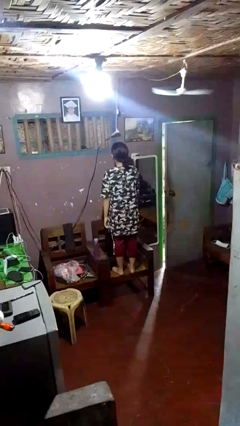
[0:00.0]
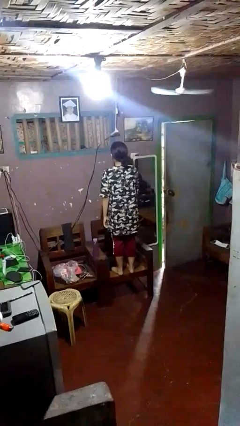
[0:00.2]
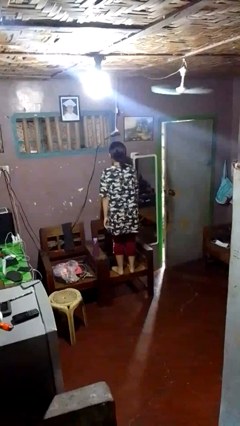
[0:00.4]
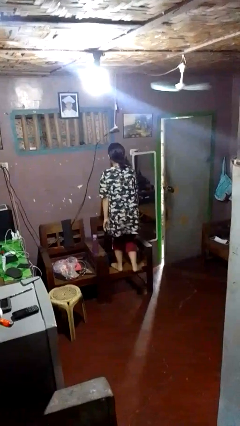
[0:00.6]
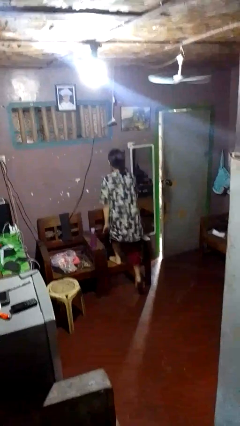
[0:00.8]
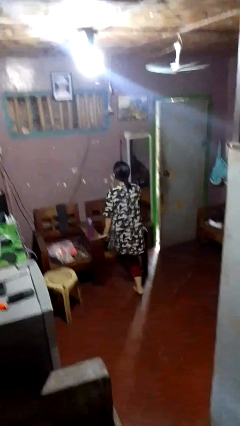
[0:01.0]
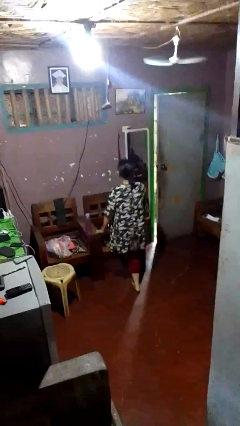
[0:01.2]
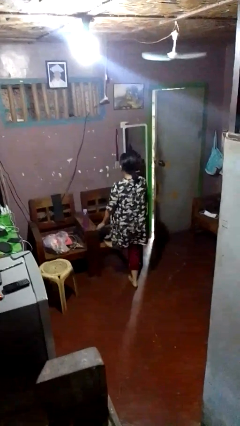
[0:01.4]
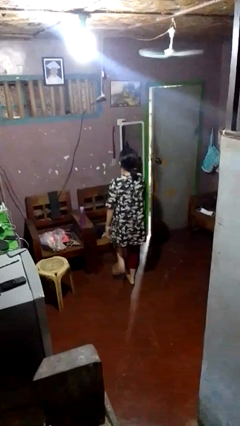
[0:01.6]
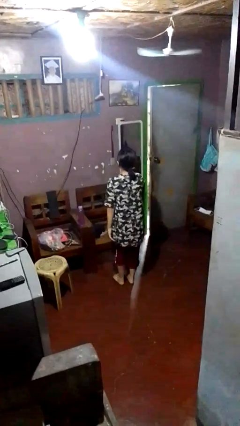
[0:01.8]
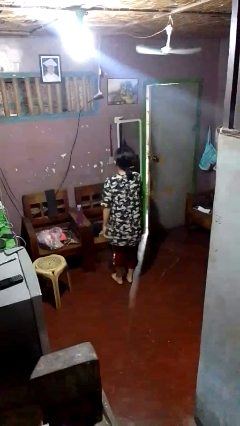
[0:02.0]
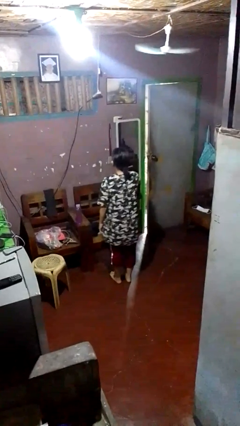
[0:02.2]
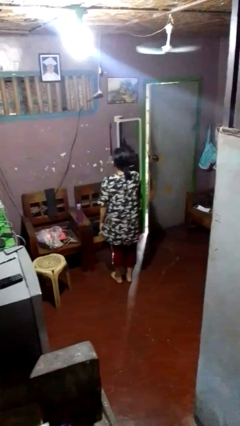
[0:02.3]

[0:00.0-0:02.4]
person climbs off chair

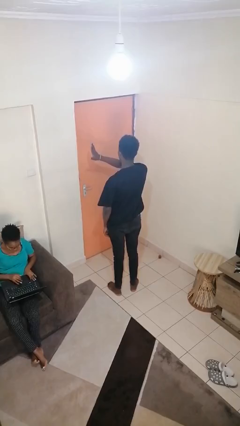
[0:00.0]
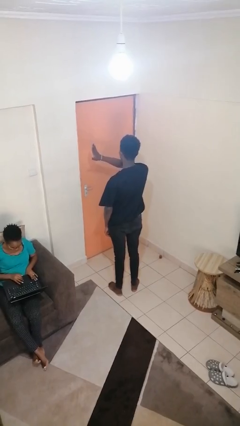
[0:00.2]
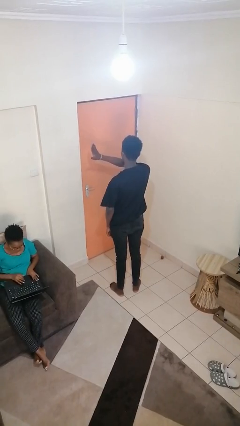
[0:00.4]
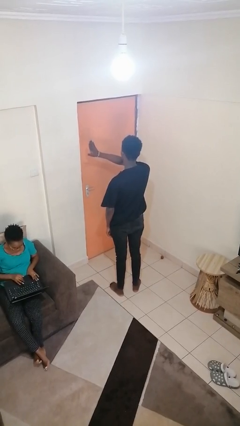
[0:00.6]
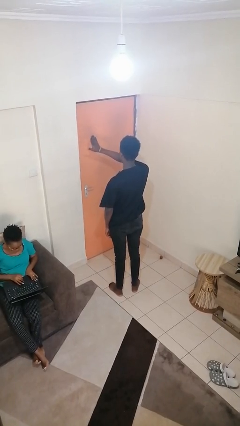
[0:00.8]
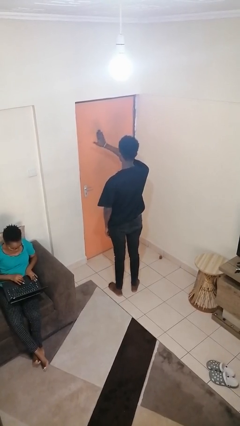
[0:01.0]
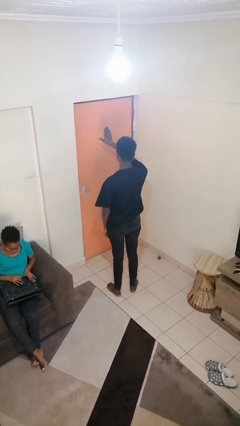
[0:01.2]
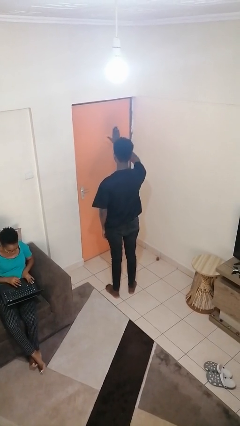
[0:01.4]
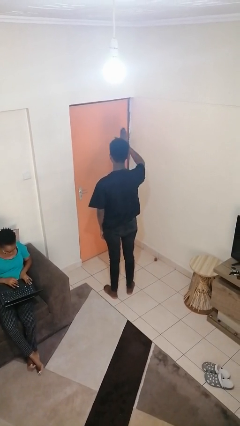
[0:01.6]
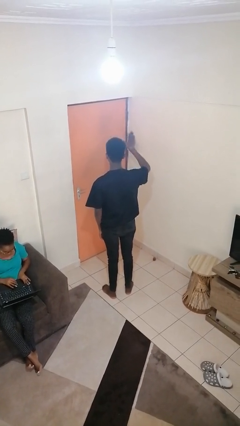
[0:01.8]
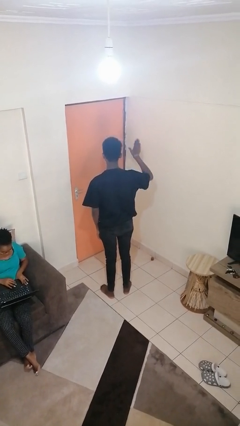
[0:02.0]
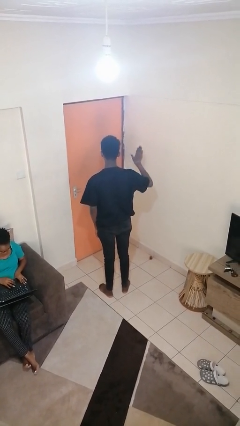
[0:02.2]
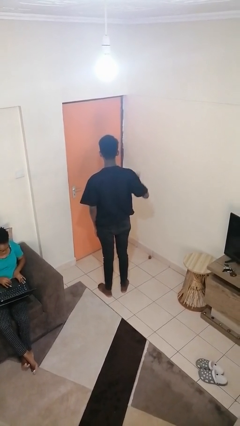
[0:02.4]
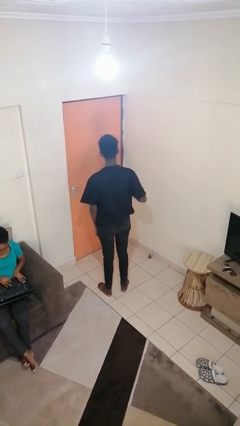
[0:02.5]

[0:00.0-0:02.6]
person gestures swipe right

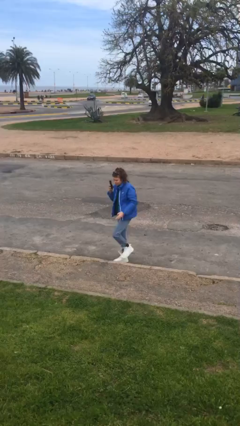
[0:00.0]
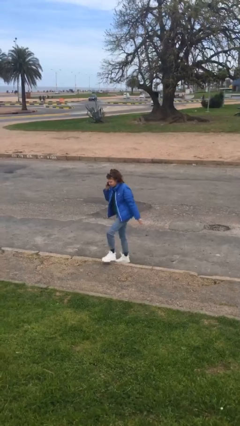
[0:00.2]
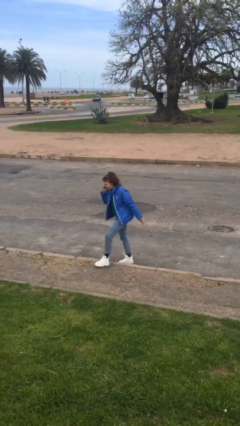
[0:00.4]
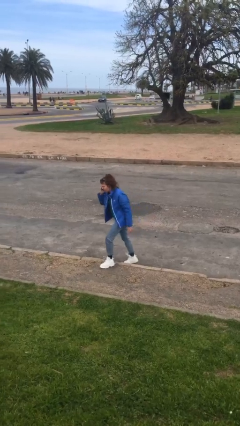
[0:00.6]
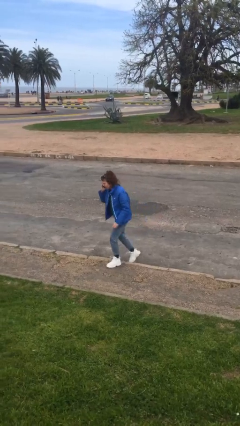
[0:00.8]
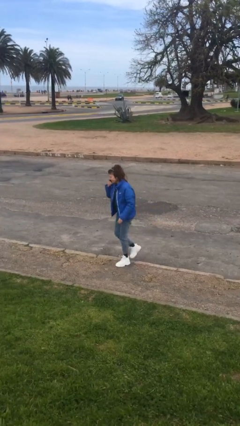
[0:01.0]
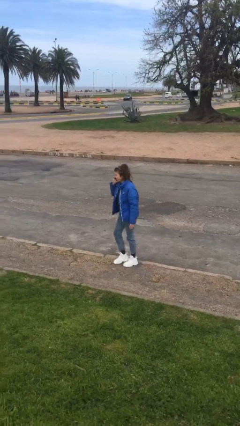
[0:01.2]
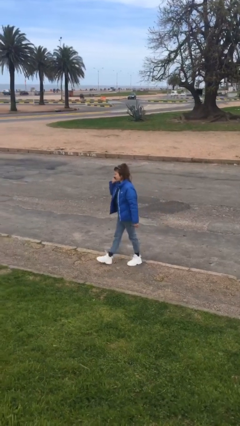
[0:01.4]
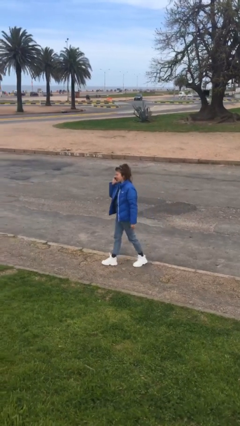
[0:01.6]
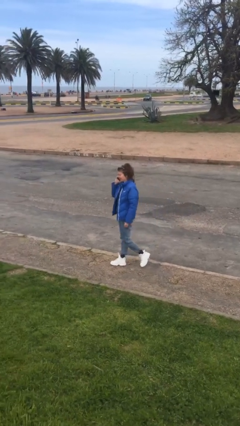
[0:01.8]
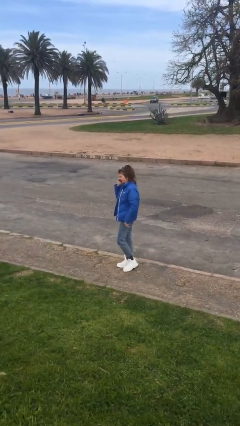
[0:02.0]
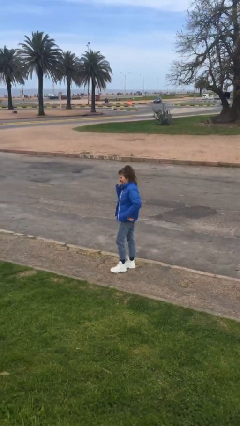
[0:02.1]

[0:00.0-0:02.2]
person talks on phone

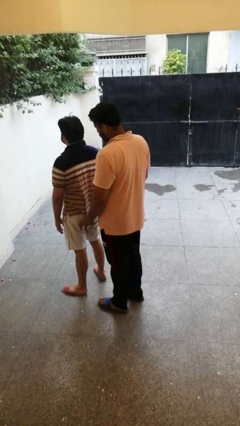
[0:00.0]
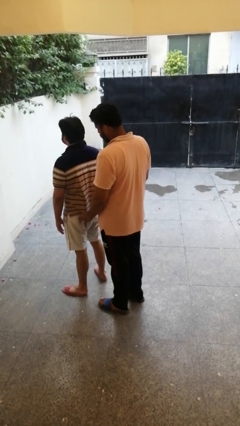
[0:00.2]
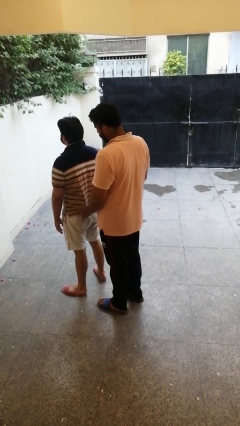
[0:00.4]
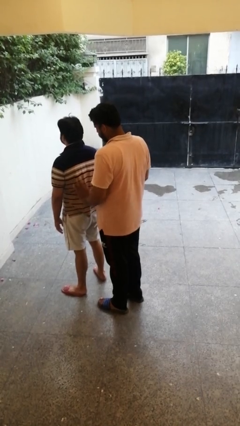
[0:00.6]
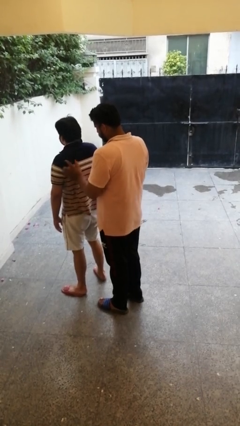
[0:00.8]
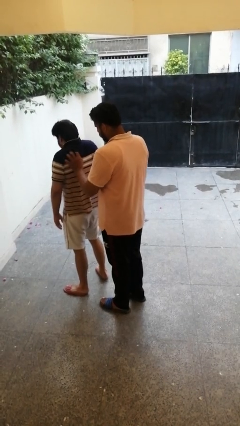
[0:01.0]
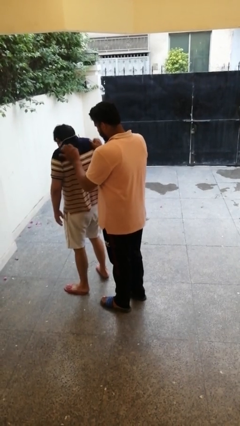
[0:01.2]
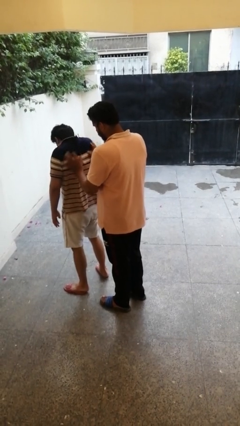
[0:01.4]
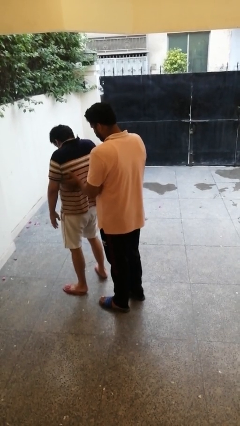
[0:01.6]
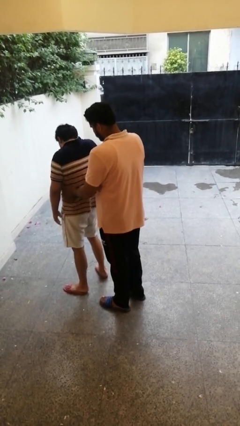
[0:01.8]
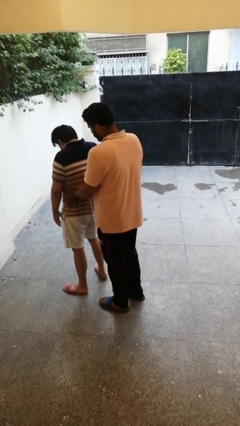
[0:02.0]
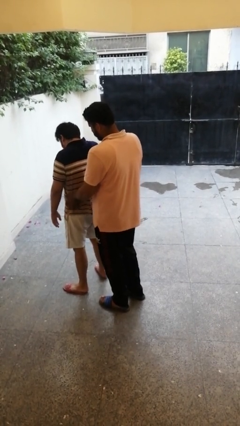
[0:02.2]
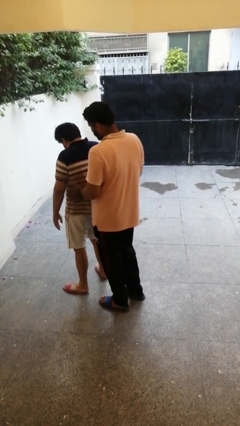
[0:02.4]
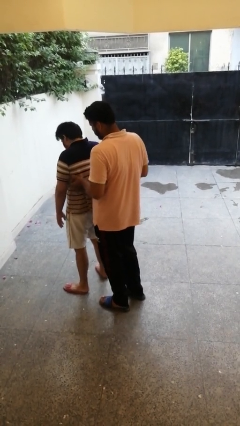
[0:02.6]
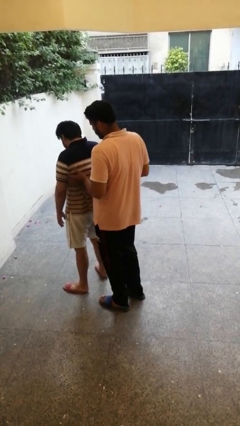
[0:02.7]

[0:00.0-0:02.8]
person tickles person

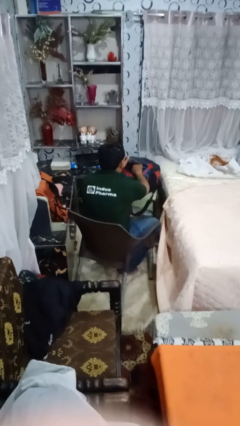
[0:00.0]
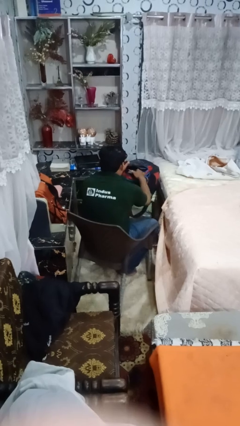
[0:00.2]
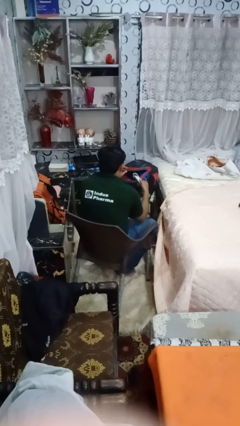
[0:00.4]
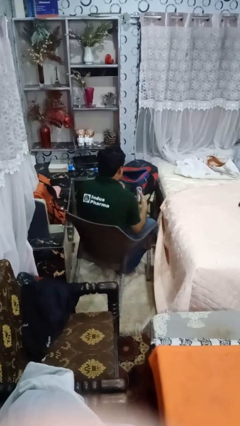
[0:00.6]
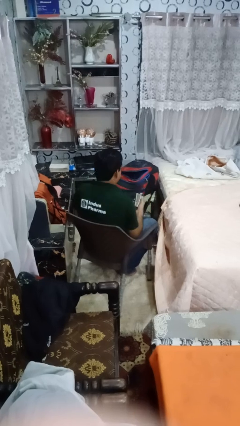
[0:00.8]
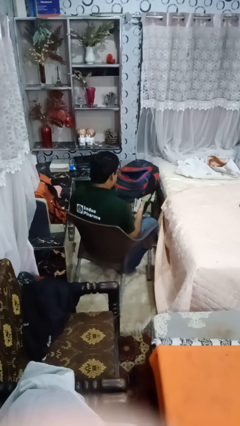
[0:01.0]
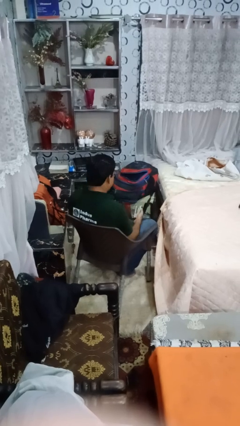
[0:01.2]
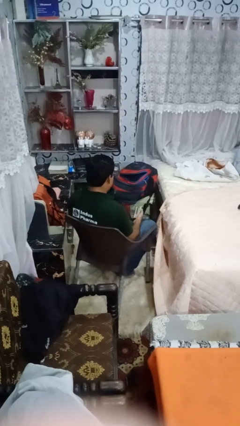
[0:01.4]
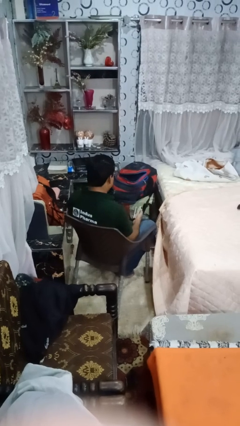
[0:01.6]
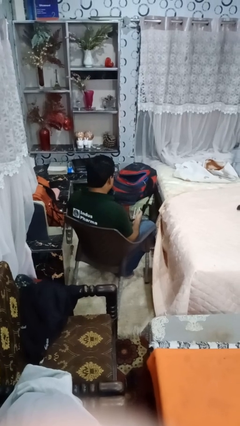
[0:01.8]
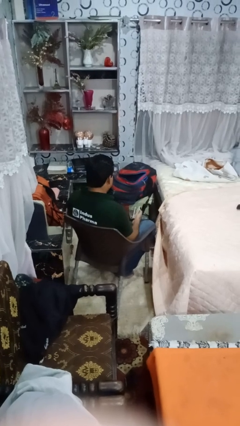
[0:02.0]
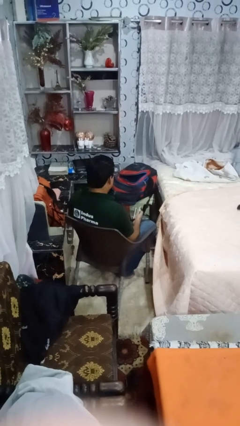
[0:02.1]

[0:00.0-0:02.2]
person takes object from backpack

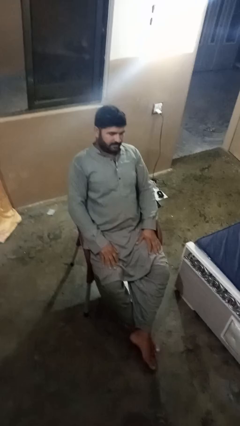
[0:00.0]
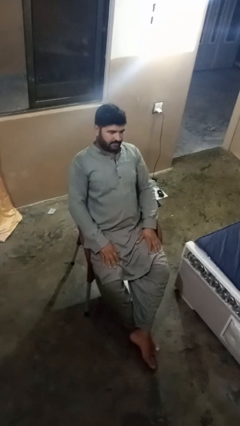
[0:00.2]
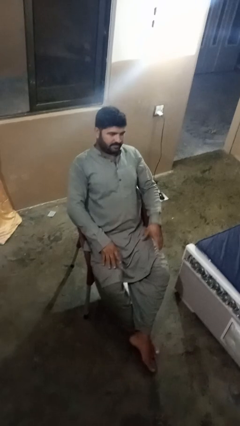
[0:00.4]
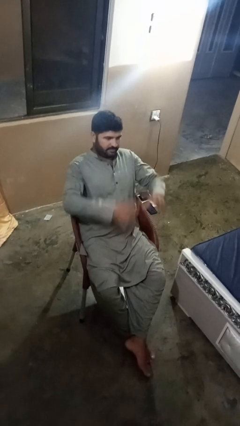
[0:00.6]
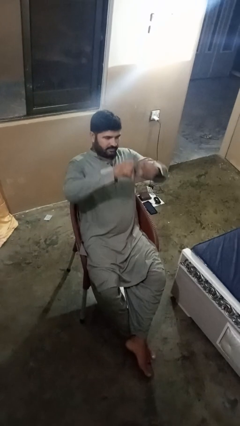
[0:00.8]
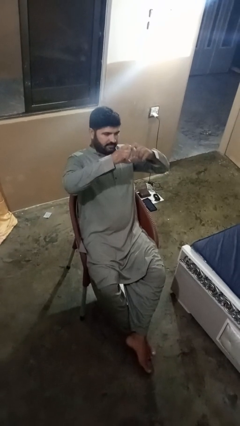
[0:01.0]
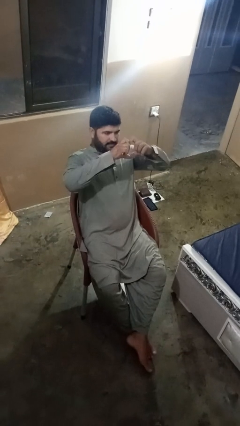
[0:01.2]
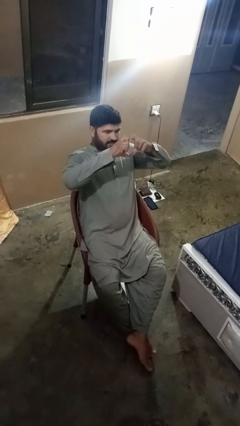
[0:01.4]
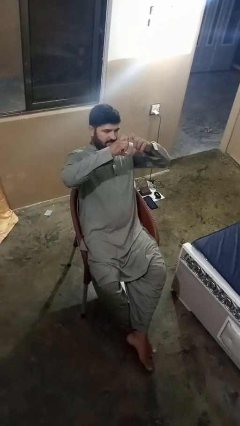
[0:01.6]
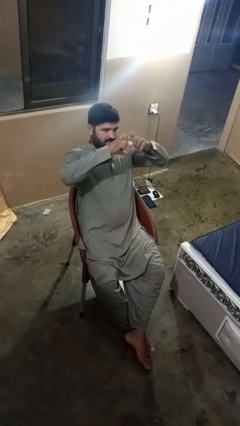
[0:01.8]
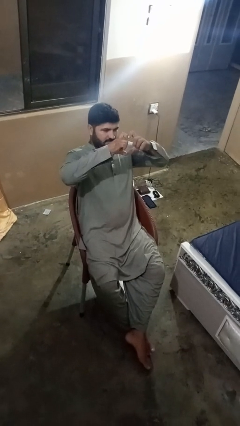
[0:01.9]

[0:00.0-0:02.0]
person gestures heart

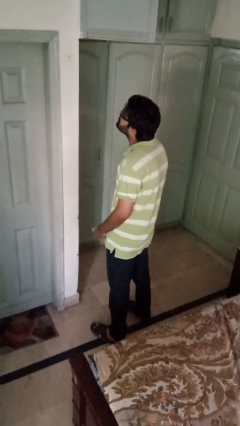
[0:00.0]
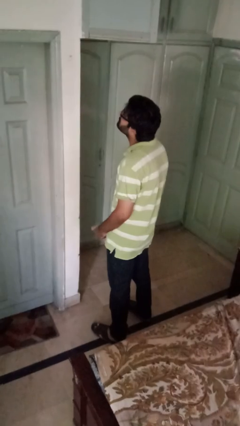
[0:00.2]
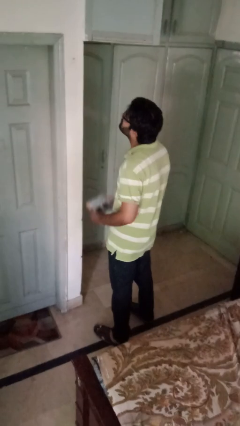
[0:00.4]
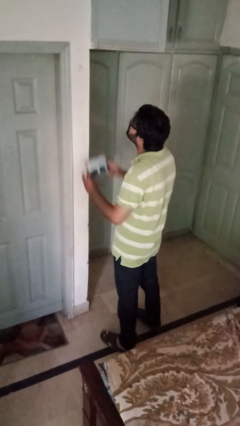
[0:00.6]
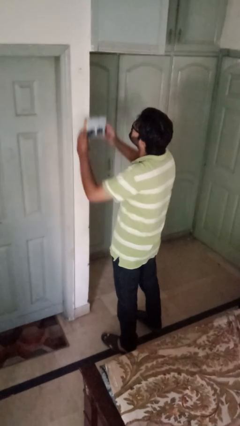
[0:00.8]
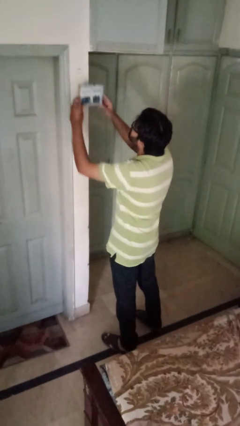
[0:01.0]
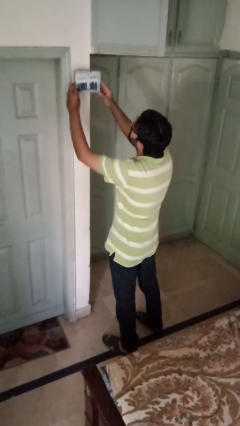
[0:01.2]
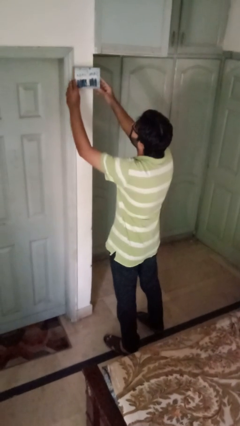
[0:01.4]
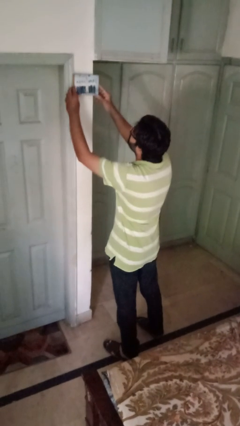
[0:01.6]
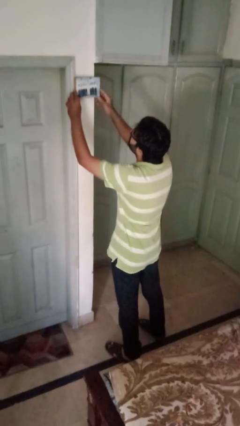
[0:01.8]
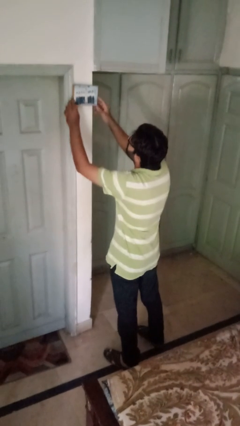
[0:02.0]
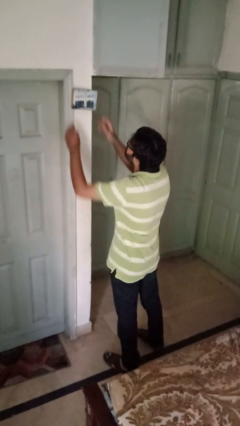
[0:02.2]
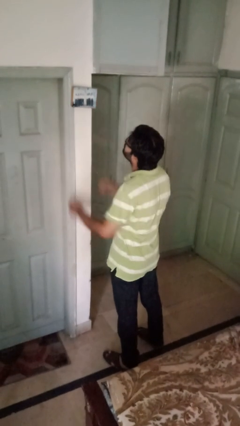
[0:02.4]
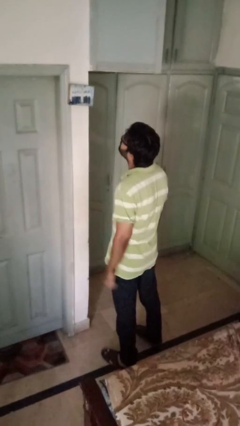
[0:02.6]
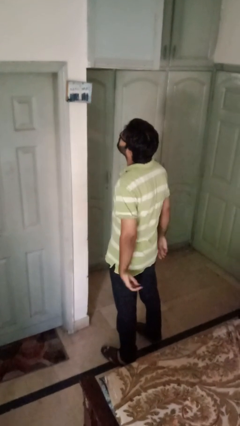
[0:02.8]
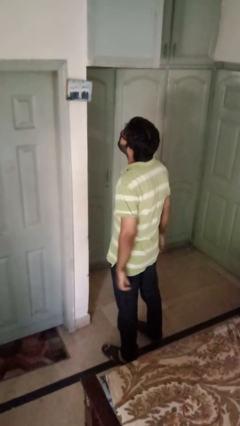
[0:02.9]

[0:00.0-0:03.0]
person puts up picture frame
